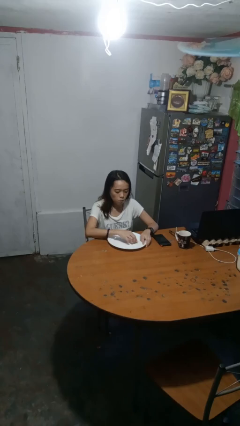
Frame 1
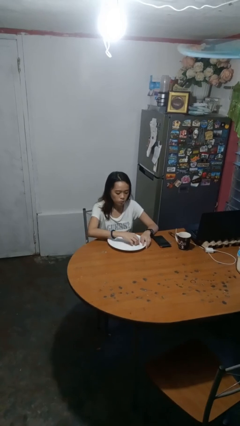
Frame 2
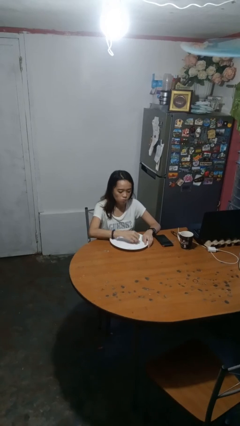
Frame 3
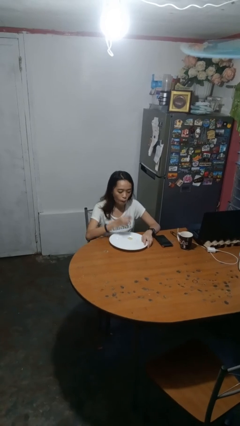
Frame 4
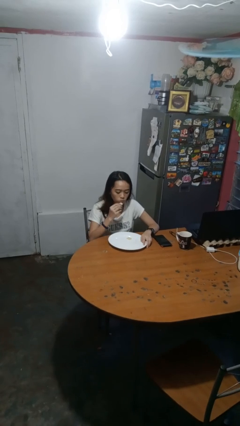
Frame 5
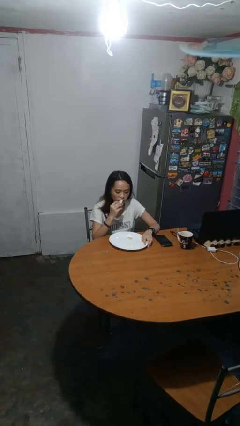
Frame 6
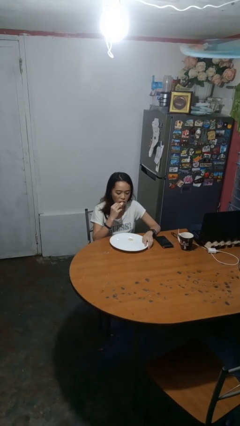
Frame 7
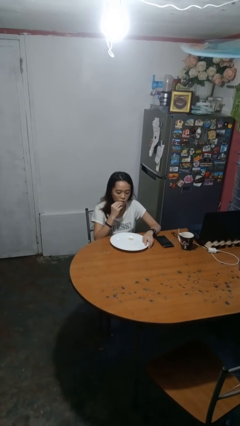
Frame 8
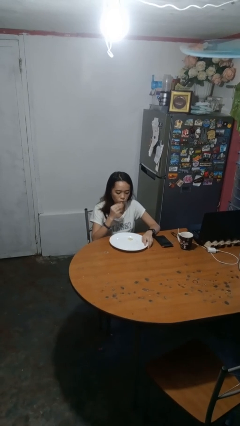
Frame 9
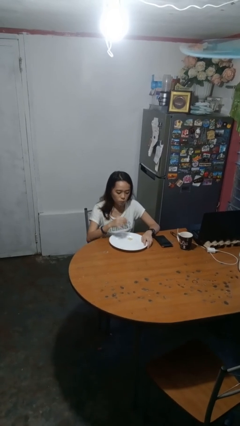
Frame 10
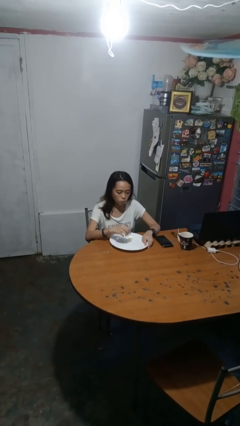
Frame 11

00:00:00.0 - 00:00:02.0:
person eats with hands

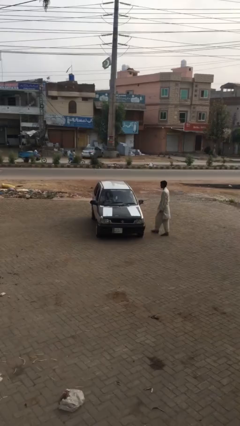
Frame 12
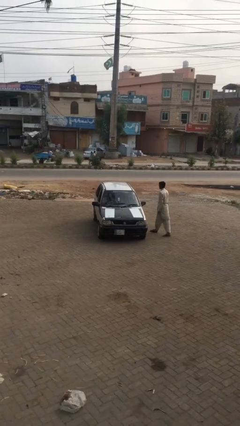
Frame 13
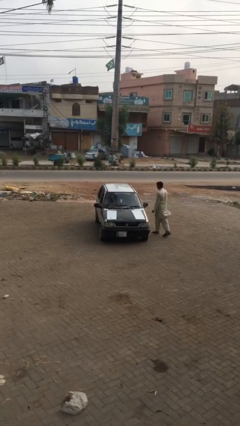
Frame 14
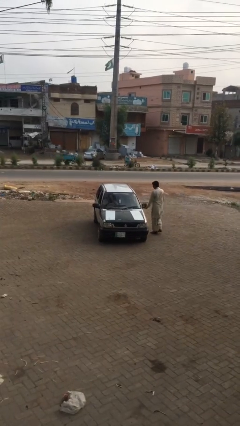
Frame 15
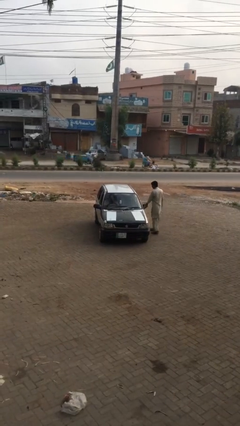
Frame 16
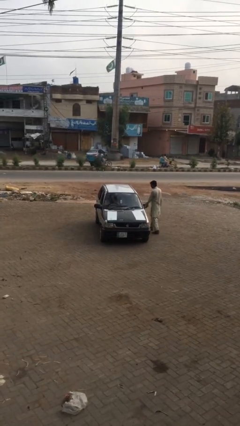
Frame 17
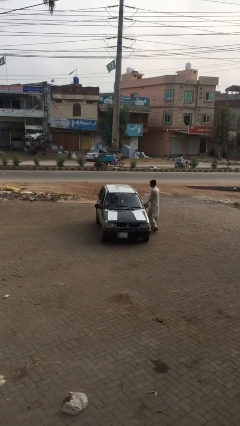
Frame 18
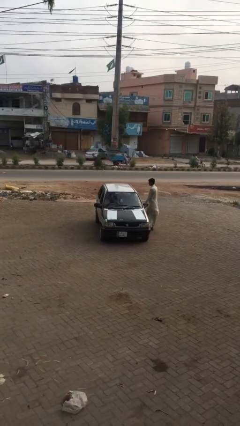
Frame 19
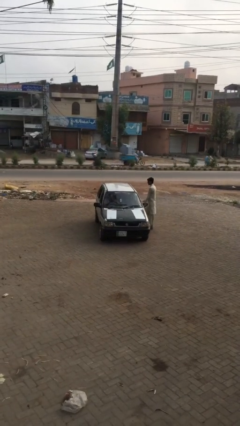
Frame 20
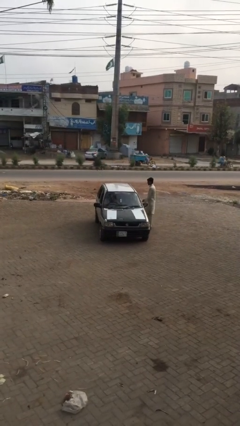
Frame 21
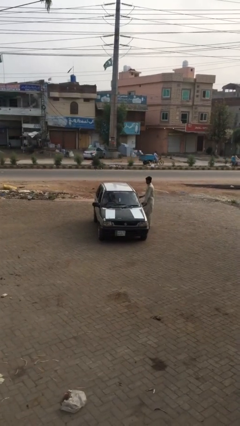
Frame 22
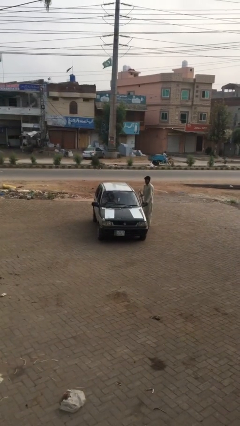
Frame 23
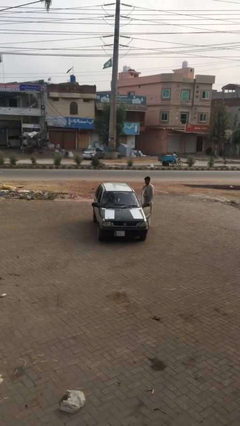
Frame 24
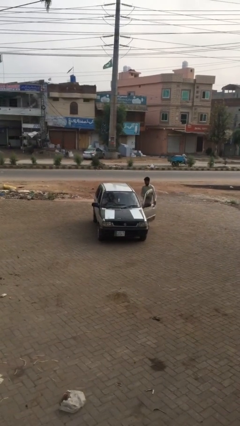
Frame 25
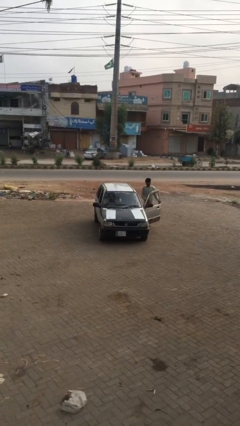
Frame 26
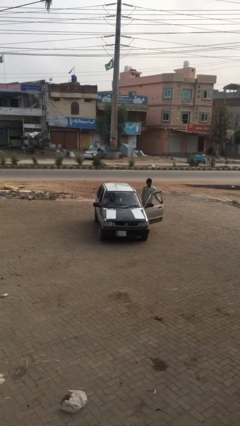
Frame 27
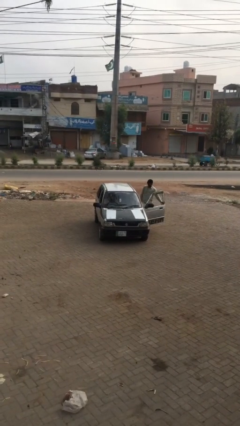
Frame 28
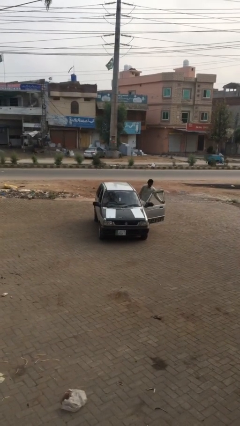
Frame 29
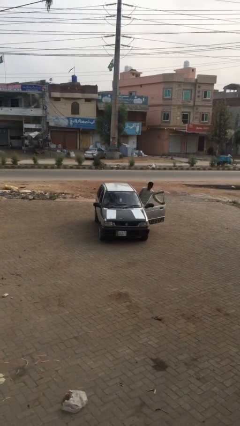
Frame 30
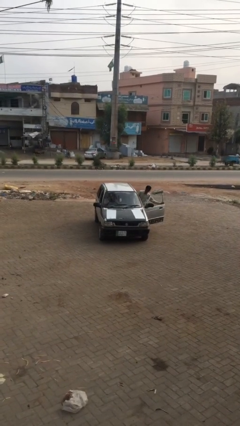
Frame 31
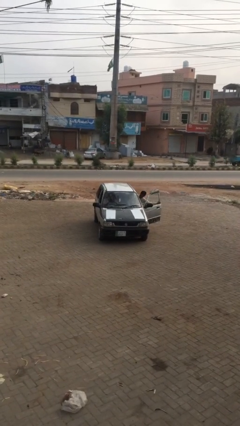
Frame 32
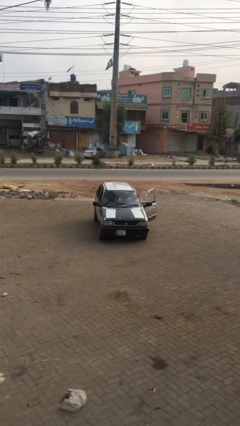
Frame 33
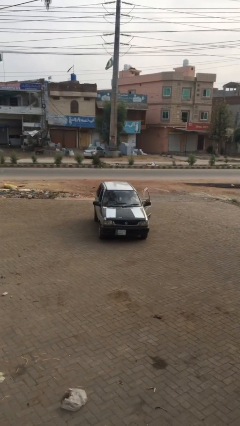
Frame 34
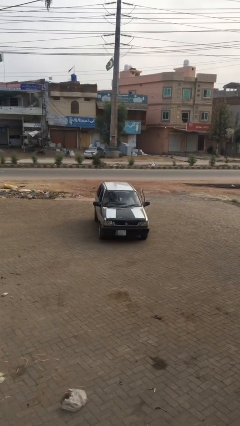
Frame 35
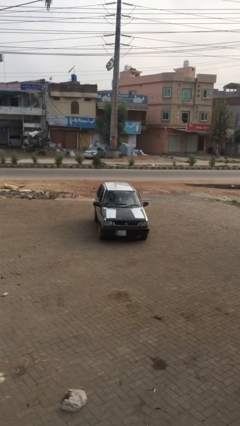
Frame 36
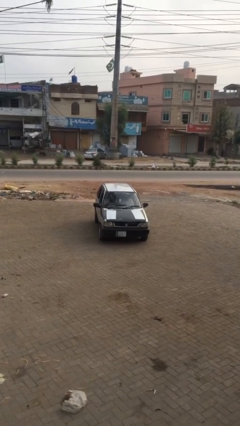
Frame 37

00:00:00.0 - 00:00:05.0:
car picks up person

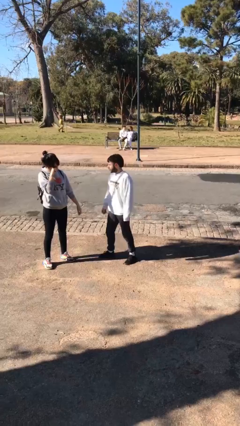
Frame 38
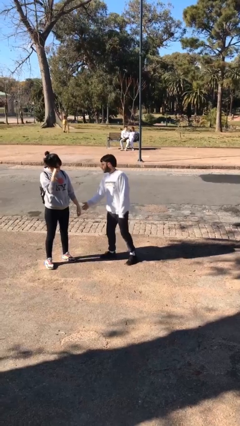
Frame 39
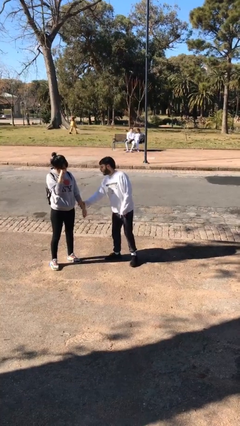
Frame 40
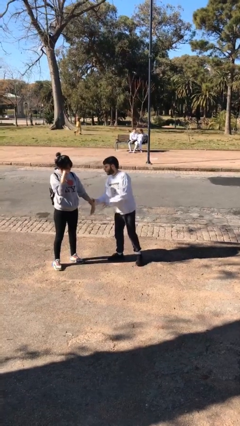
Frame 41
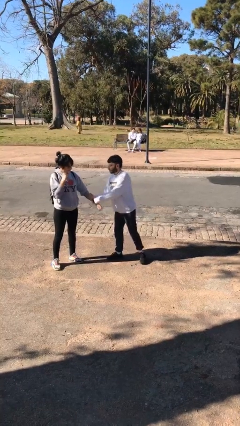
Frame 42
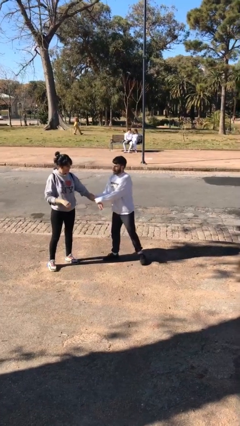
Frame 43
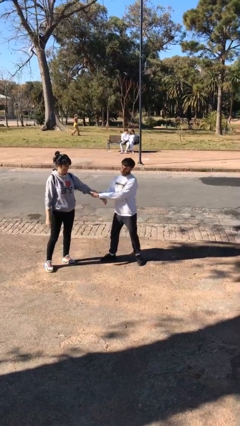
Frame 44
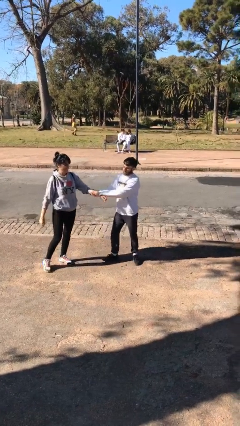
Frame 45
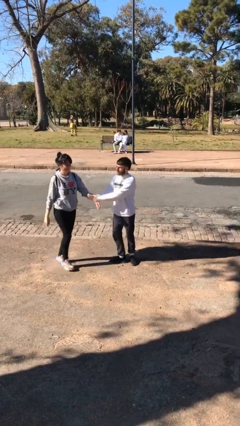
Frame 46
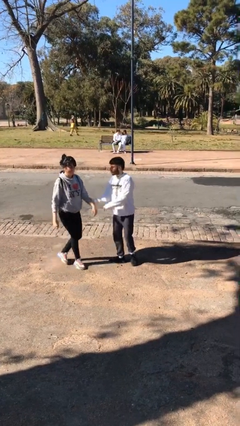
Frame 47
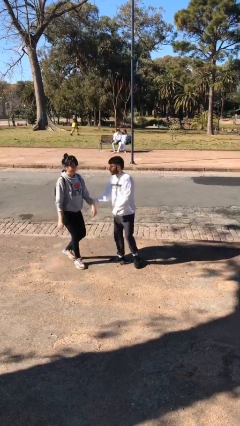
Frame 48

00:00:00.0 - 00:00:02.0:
person grabs person by forearm

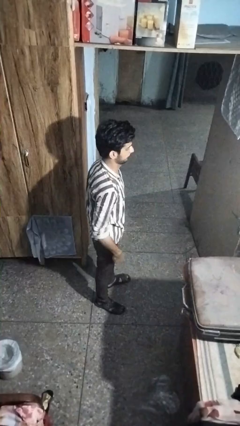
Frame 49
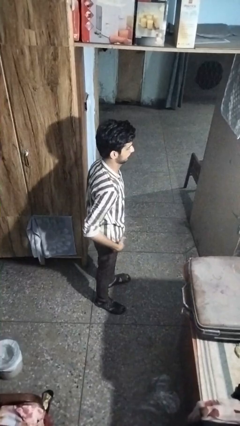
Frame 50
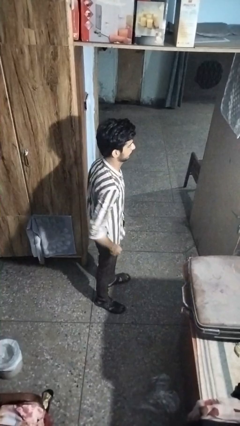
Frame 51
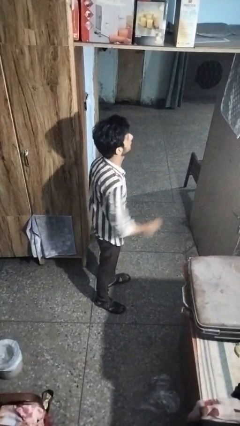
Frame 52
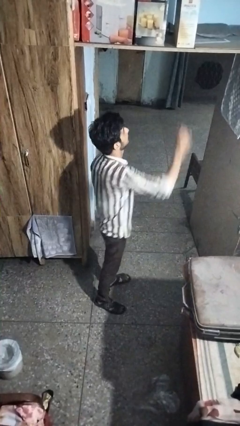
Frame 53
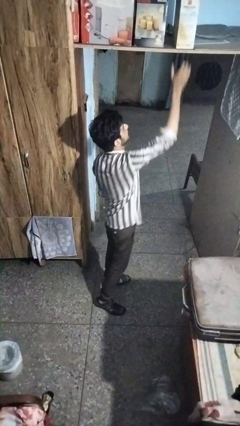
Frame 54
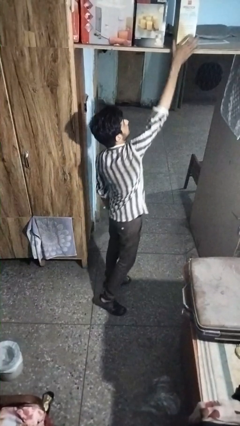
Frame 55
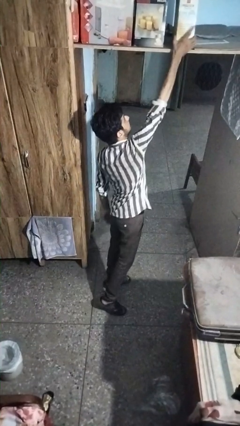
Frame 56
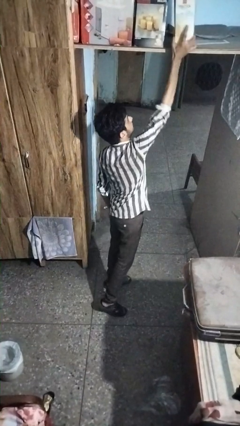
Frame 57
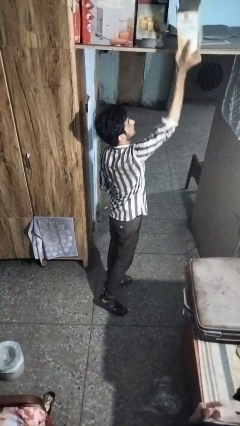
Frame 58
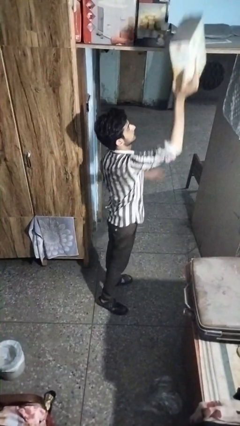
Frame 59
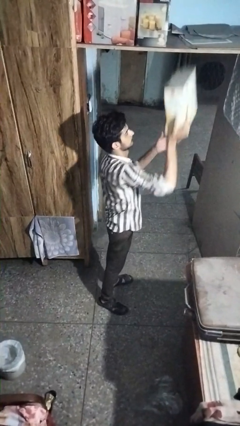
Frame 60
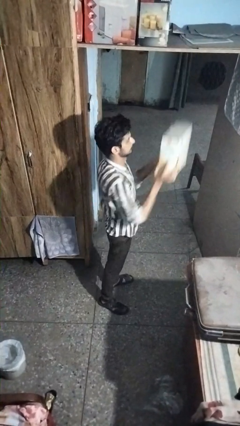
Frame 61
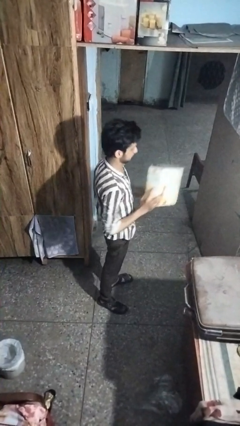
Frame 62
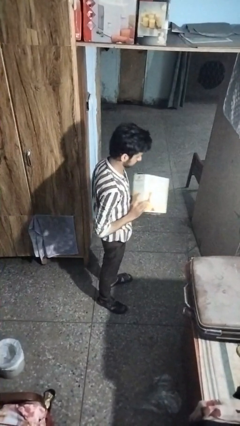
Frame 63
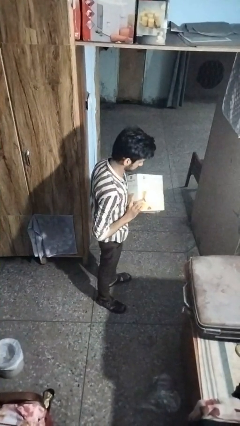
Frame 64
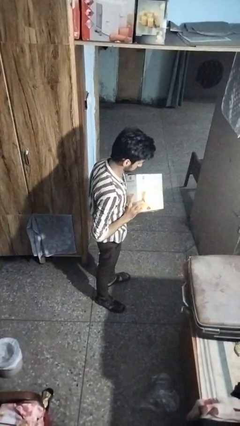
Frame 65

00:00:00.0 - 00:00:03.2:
person picks up object from shelf

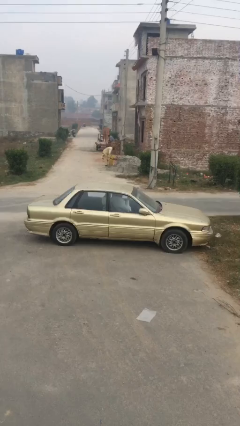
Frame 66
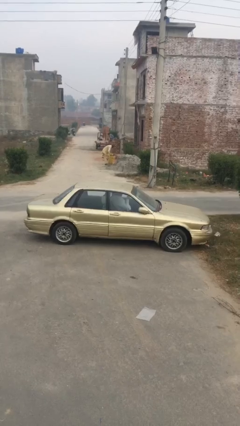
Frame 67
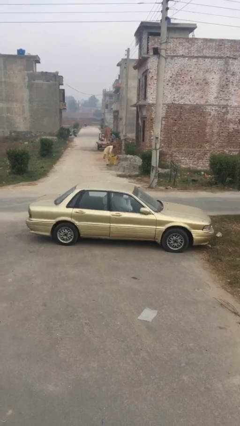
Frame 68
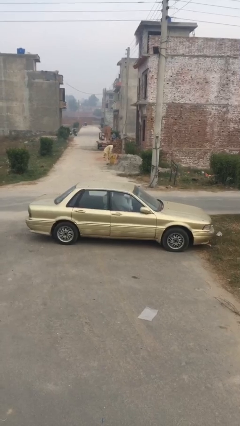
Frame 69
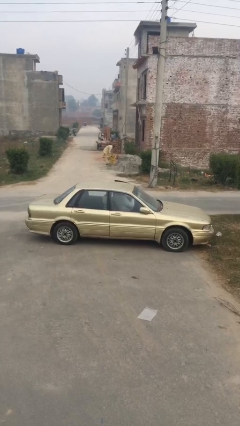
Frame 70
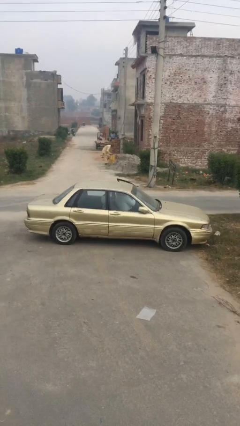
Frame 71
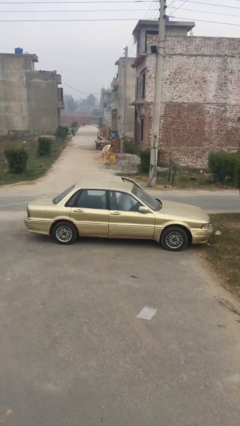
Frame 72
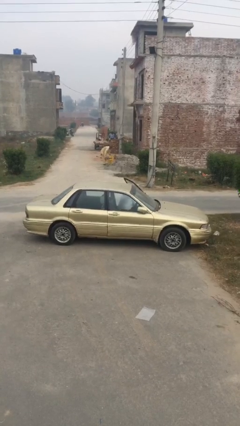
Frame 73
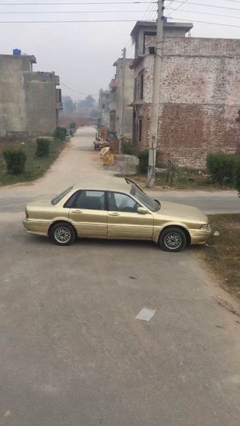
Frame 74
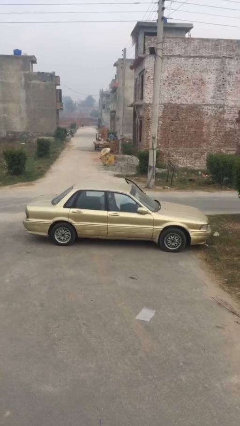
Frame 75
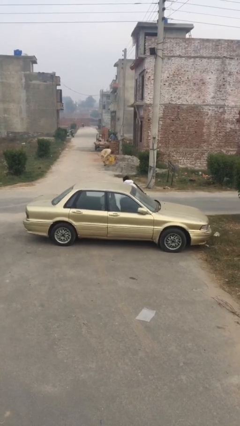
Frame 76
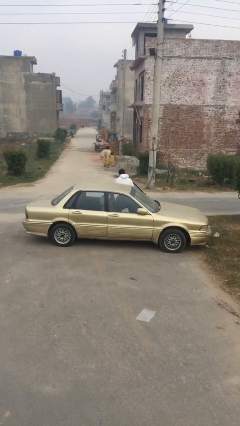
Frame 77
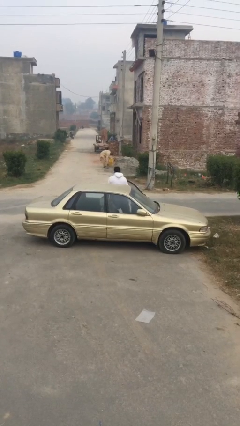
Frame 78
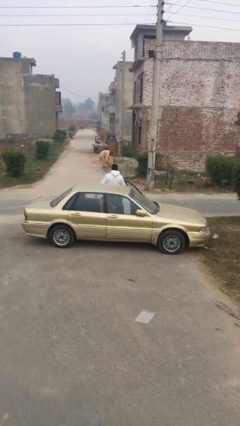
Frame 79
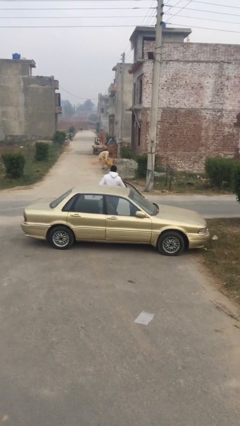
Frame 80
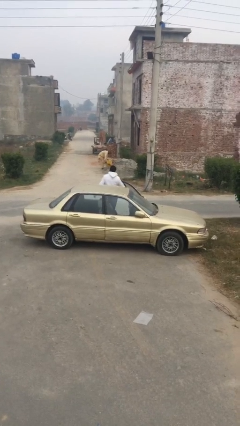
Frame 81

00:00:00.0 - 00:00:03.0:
car drops off person

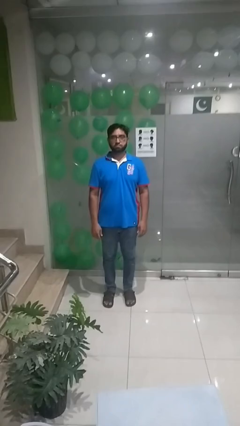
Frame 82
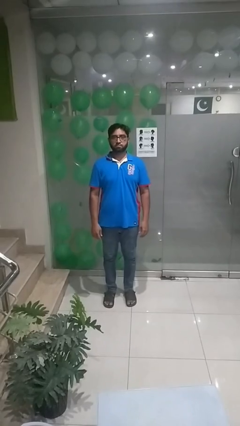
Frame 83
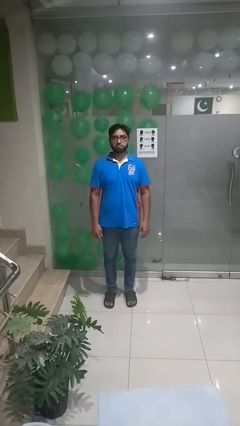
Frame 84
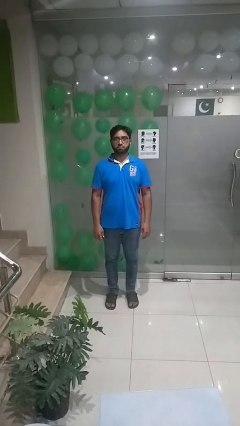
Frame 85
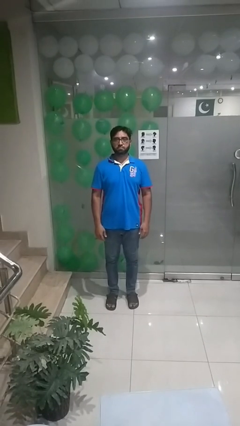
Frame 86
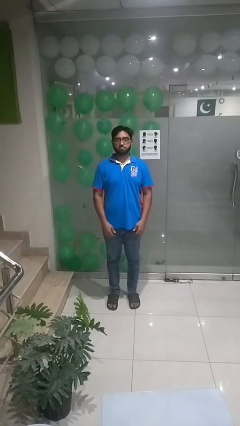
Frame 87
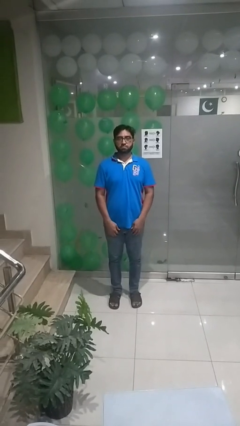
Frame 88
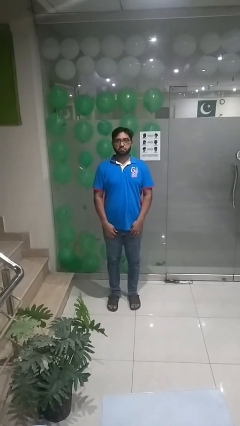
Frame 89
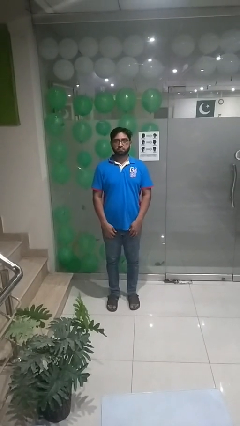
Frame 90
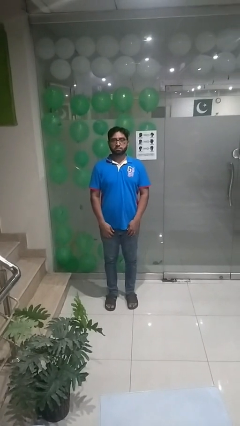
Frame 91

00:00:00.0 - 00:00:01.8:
person stands up from floor

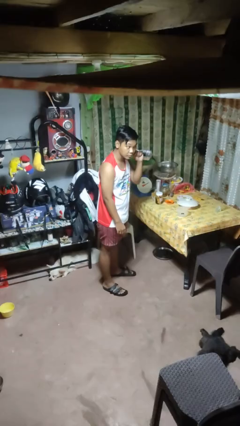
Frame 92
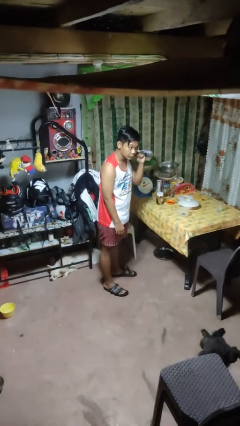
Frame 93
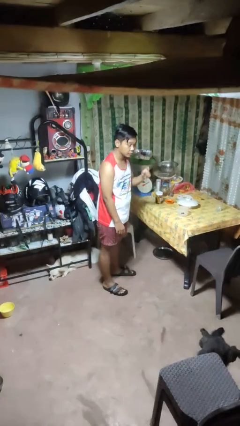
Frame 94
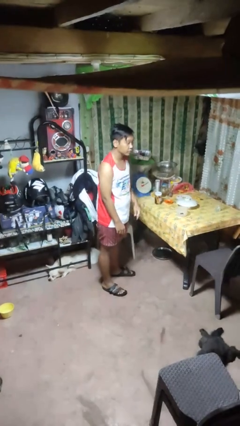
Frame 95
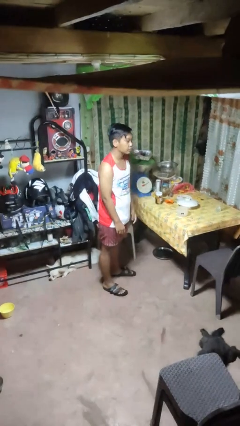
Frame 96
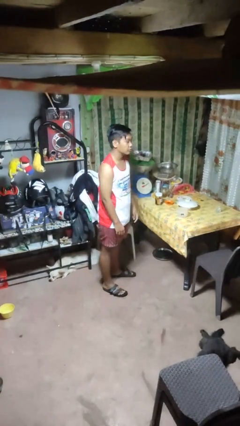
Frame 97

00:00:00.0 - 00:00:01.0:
person gestures listen closely
